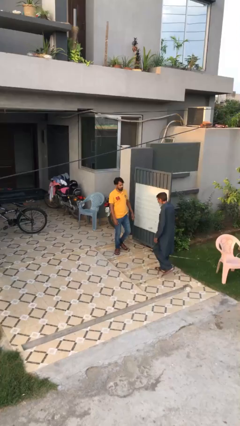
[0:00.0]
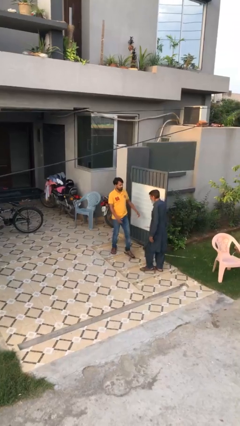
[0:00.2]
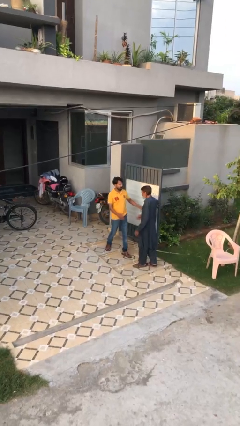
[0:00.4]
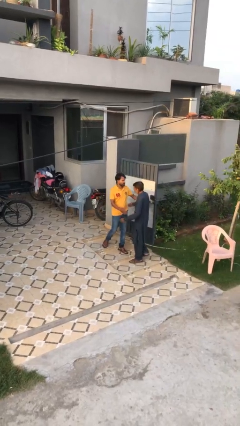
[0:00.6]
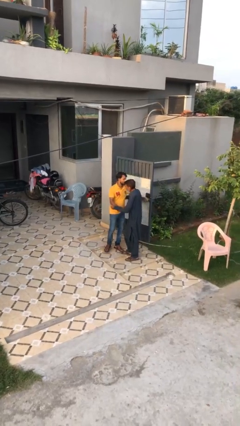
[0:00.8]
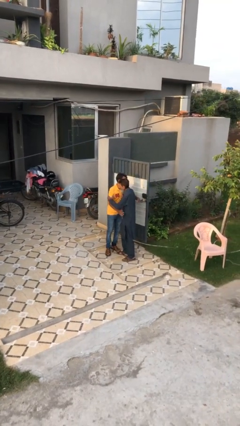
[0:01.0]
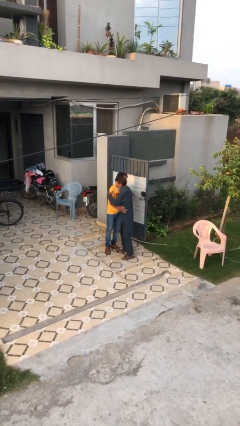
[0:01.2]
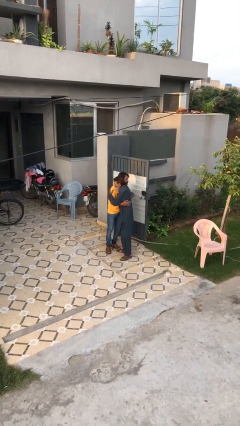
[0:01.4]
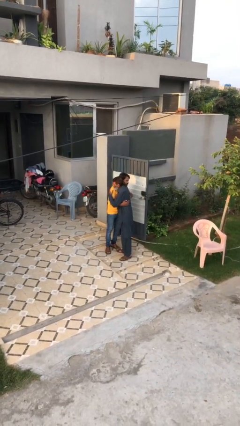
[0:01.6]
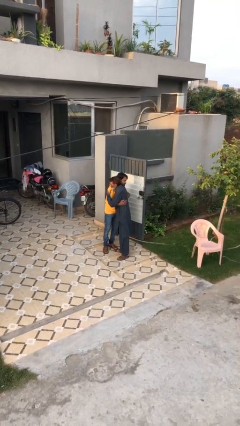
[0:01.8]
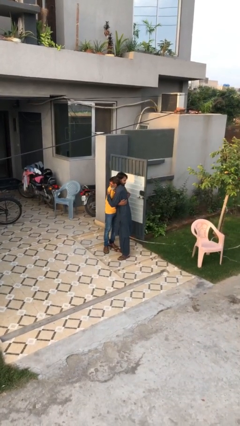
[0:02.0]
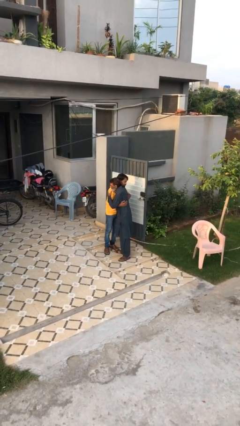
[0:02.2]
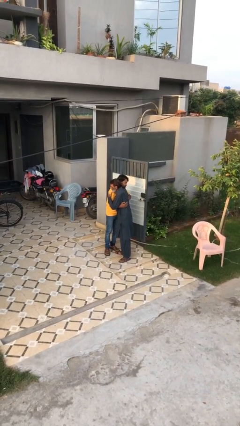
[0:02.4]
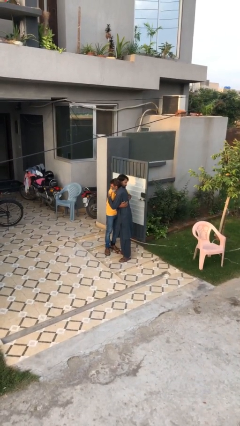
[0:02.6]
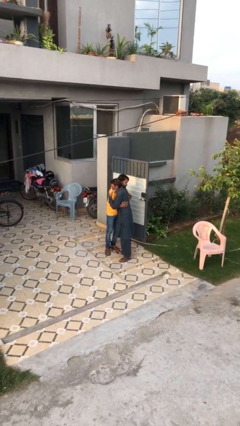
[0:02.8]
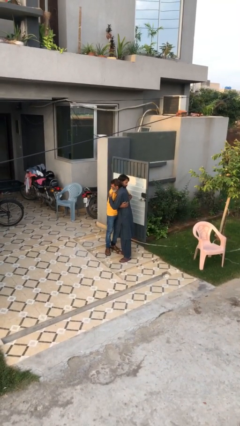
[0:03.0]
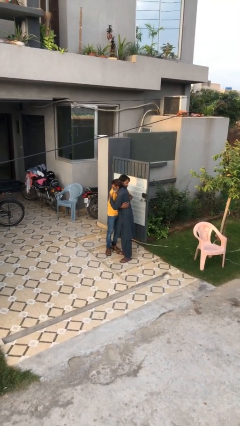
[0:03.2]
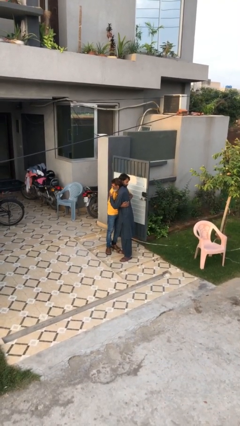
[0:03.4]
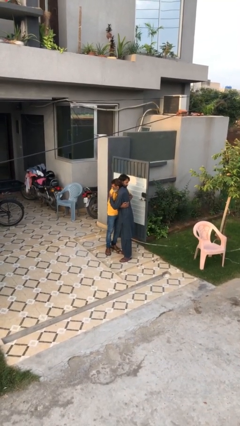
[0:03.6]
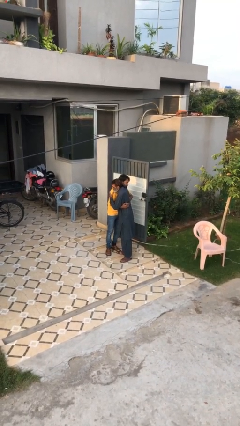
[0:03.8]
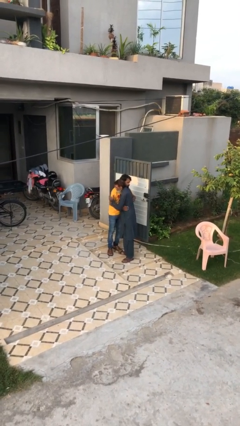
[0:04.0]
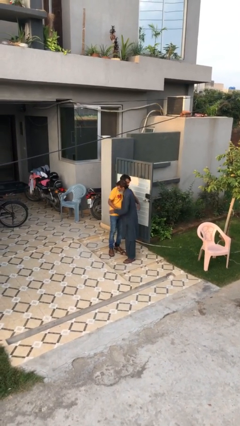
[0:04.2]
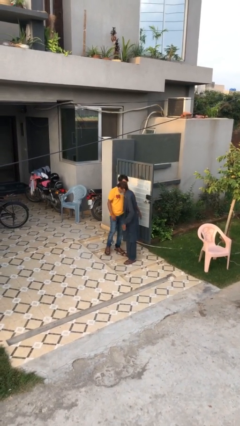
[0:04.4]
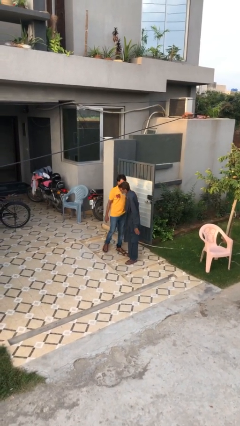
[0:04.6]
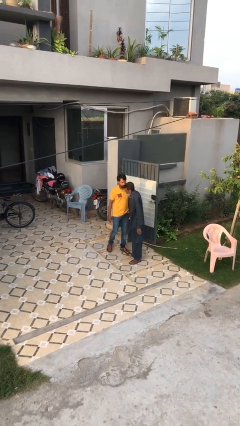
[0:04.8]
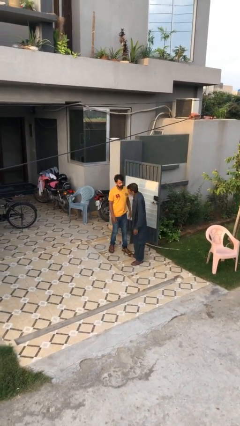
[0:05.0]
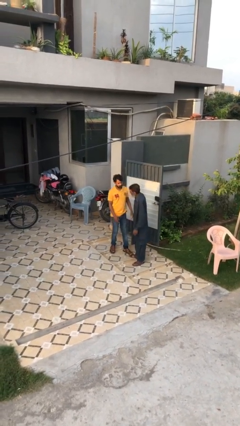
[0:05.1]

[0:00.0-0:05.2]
person embraces person

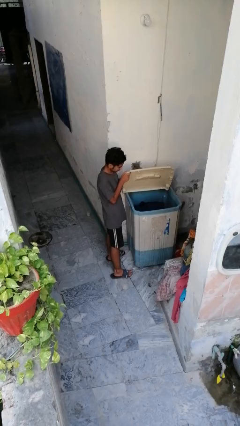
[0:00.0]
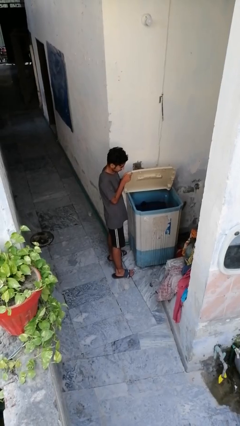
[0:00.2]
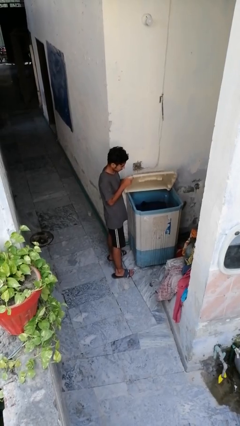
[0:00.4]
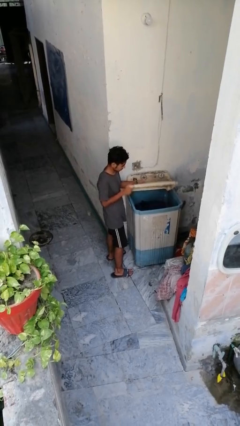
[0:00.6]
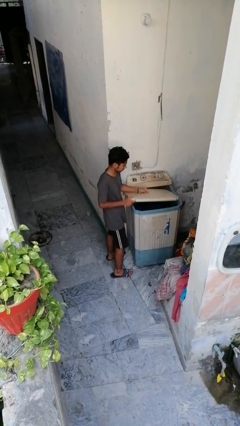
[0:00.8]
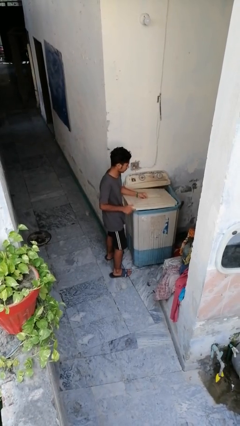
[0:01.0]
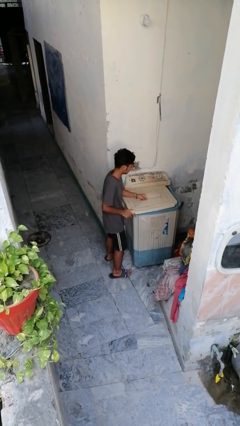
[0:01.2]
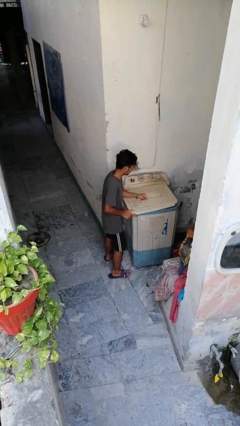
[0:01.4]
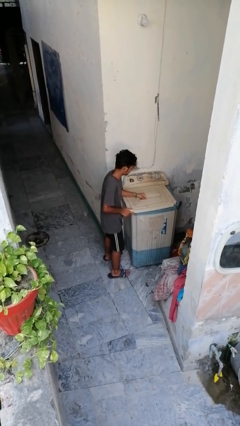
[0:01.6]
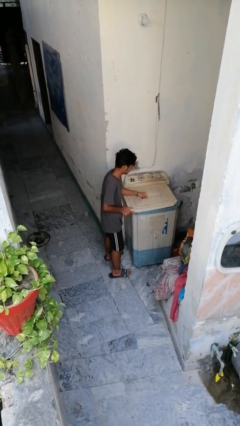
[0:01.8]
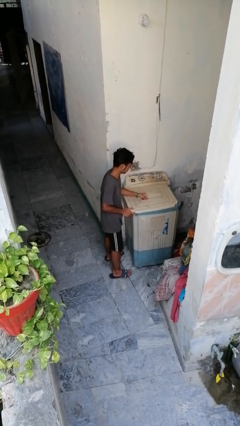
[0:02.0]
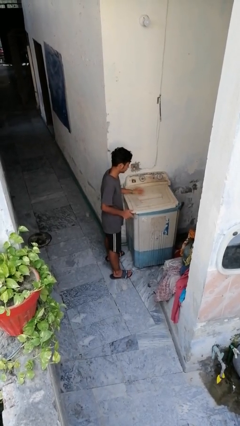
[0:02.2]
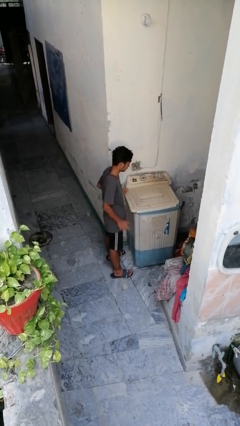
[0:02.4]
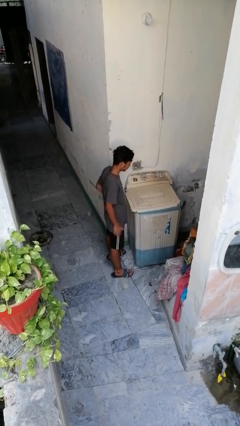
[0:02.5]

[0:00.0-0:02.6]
person closes clothes washer

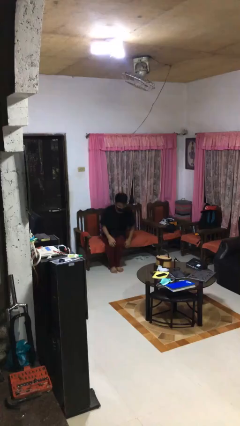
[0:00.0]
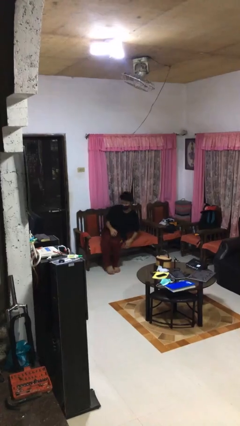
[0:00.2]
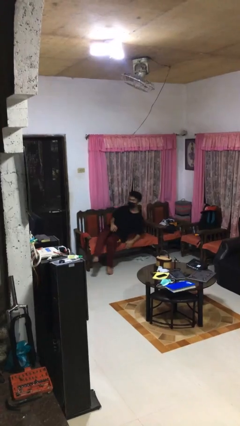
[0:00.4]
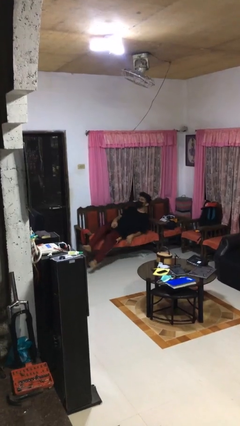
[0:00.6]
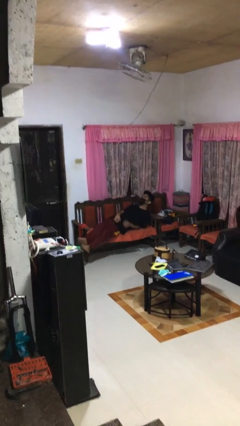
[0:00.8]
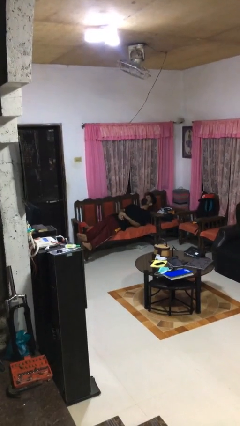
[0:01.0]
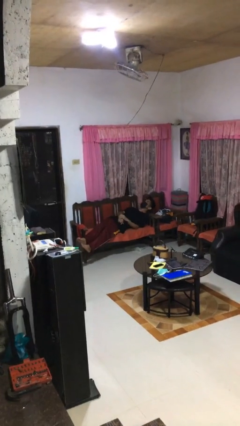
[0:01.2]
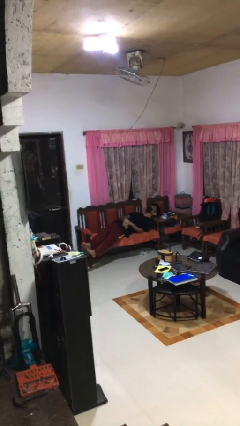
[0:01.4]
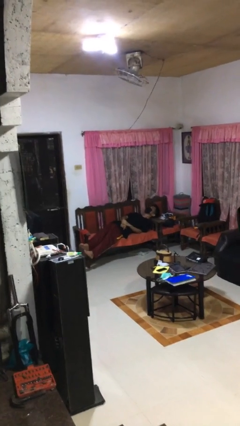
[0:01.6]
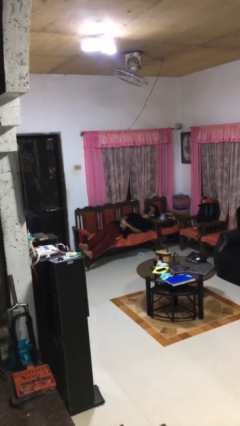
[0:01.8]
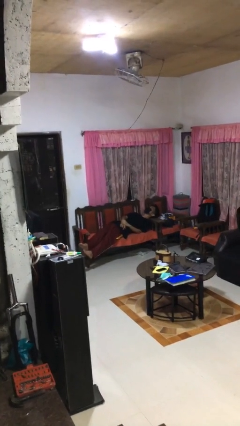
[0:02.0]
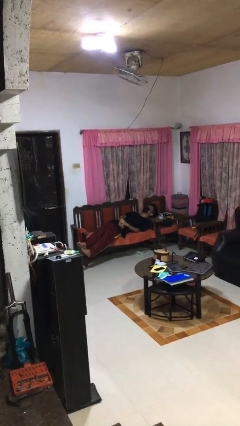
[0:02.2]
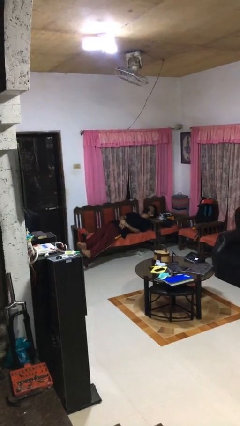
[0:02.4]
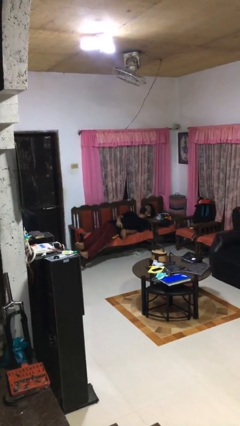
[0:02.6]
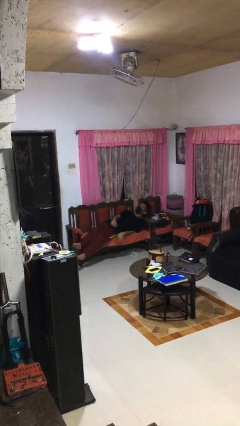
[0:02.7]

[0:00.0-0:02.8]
person lies down on couch

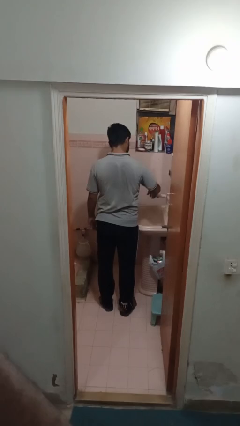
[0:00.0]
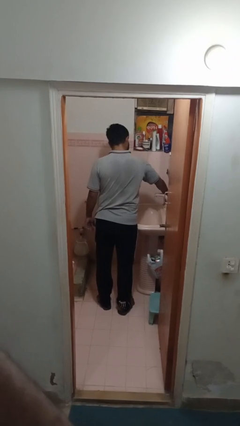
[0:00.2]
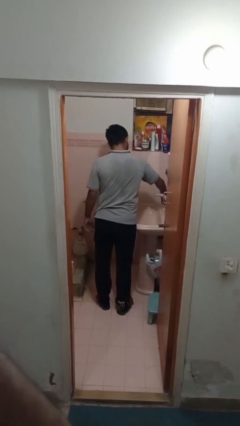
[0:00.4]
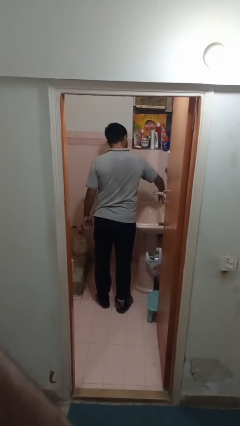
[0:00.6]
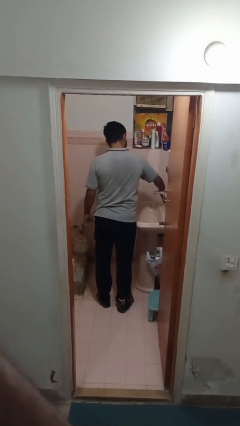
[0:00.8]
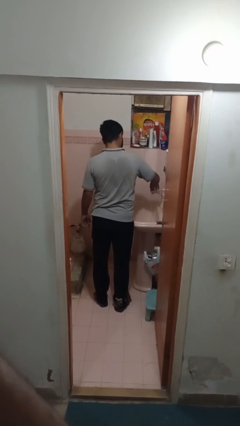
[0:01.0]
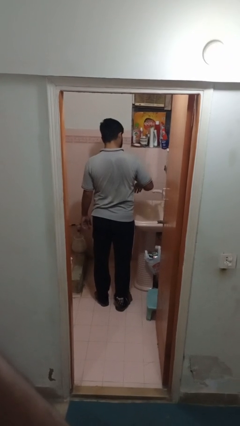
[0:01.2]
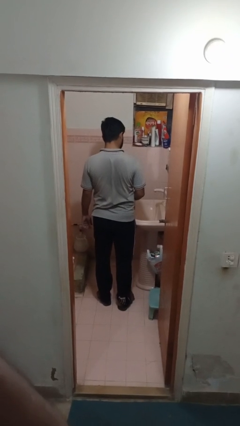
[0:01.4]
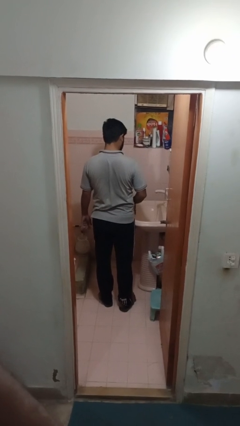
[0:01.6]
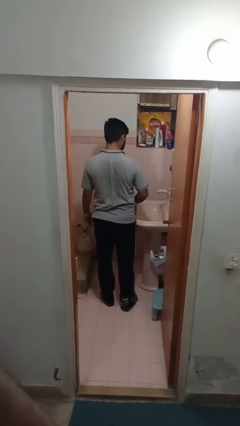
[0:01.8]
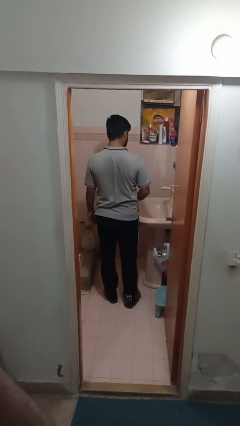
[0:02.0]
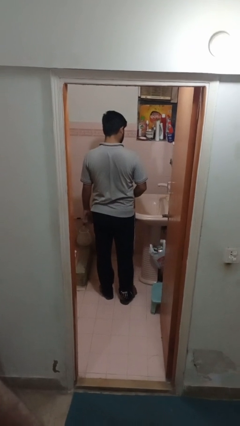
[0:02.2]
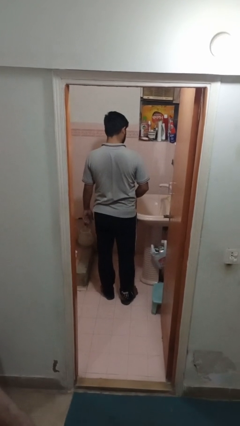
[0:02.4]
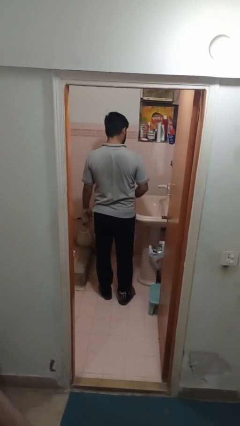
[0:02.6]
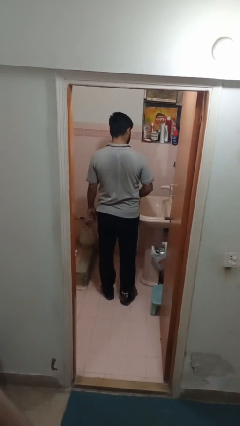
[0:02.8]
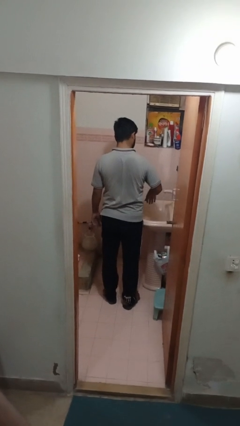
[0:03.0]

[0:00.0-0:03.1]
person turns on faucet

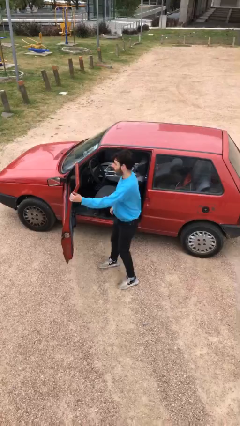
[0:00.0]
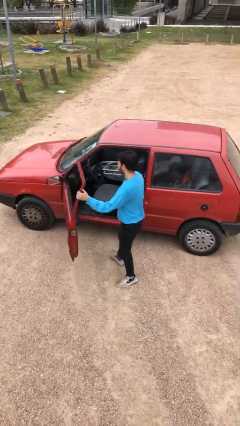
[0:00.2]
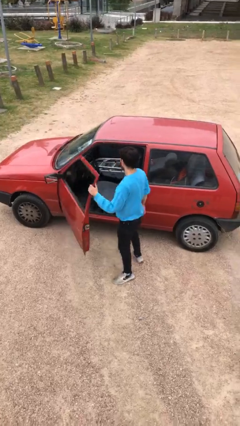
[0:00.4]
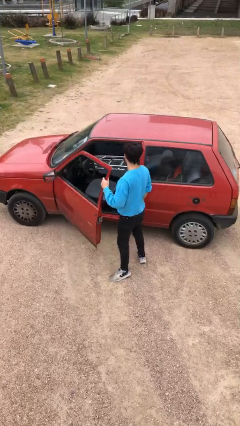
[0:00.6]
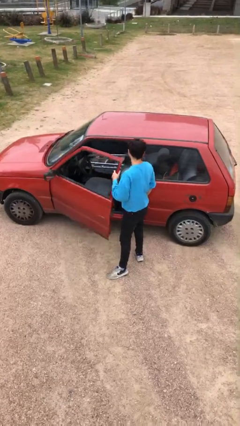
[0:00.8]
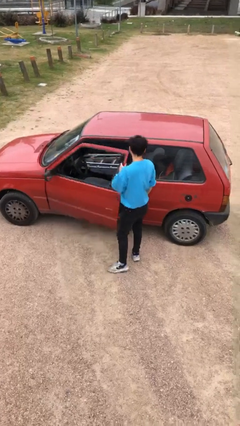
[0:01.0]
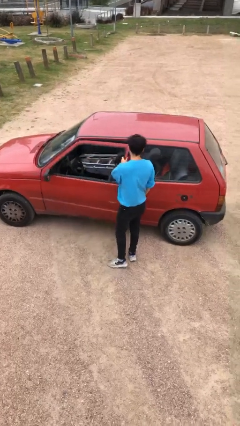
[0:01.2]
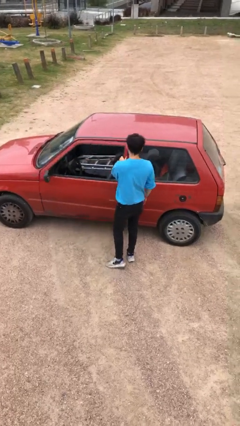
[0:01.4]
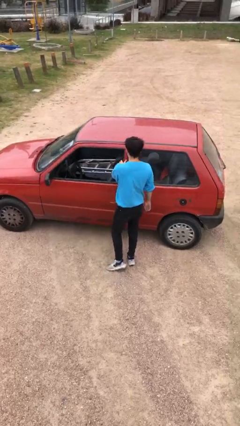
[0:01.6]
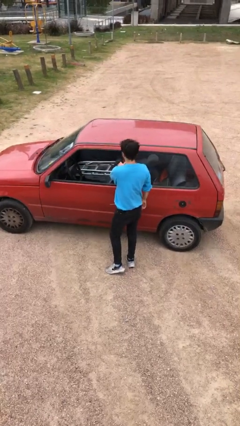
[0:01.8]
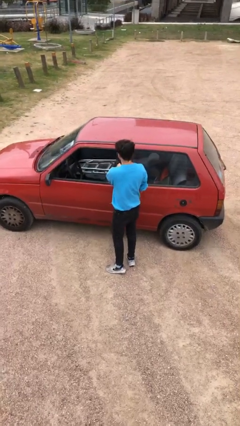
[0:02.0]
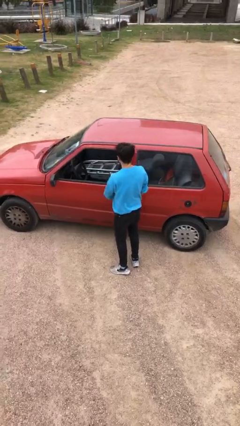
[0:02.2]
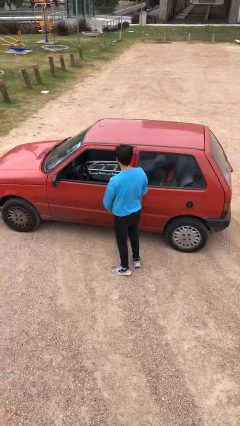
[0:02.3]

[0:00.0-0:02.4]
person closes car door

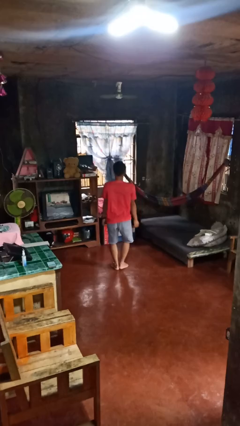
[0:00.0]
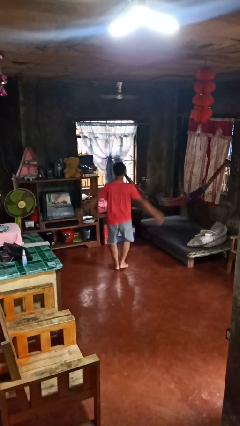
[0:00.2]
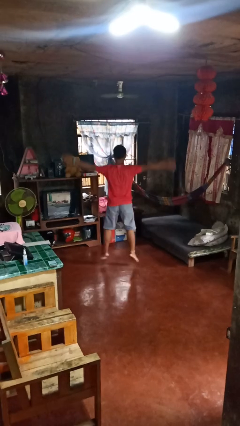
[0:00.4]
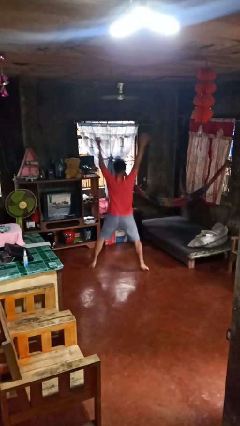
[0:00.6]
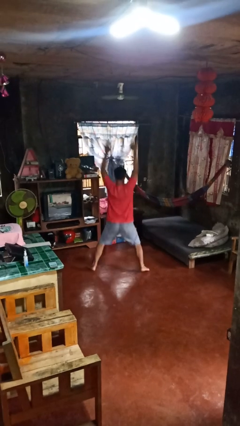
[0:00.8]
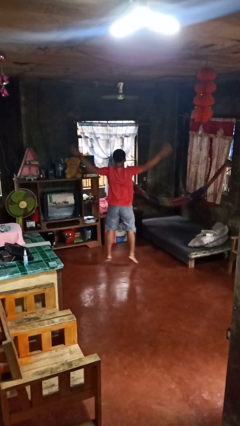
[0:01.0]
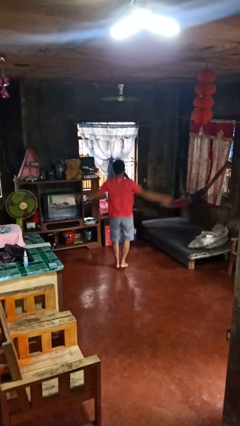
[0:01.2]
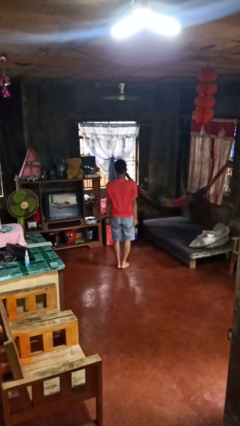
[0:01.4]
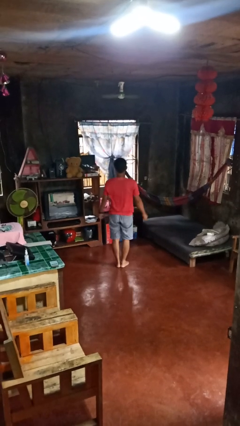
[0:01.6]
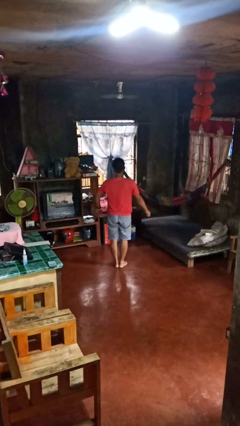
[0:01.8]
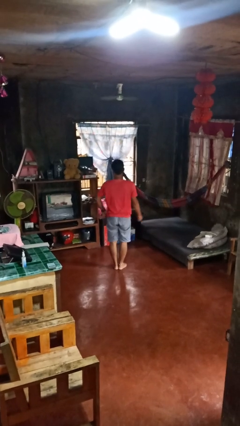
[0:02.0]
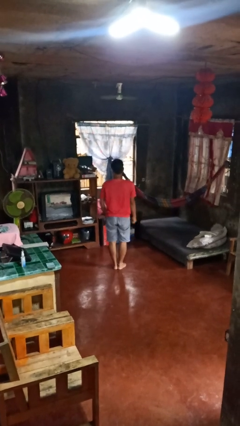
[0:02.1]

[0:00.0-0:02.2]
person exercises with jumping jacks
